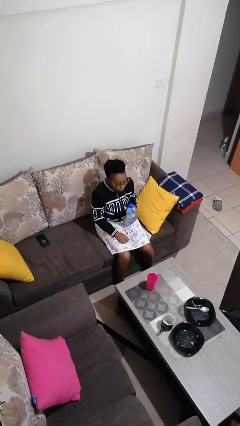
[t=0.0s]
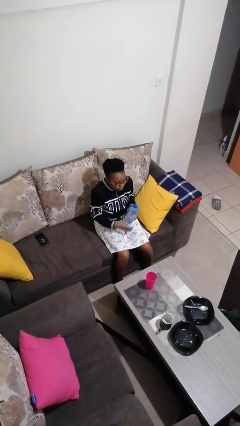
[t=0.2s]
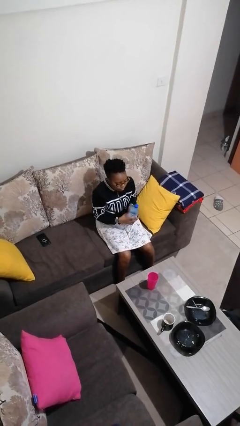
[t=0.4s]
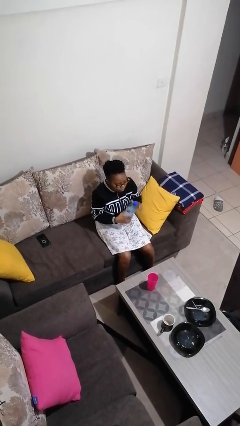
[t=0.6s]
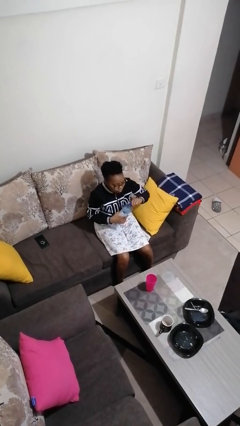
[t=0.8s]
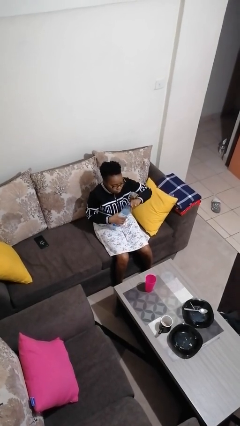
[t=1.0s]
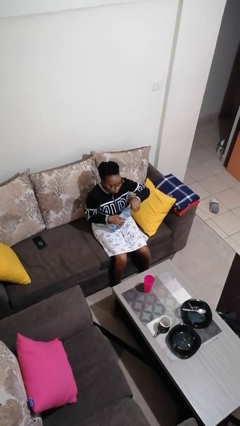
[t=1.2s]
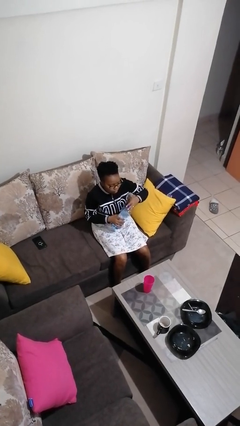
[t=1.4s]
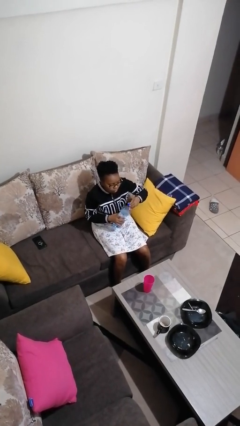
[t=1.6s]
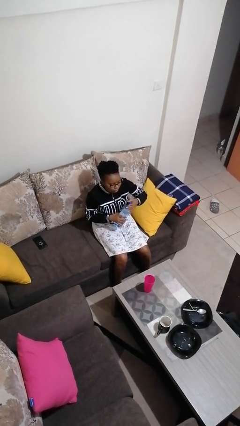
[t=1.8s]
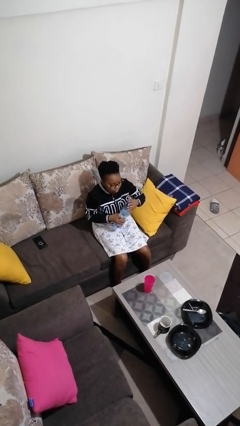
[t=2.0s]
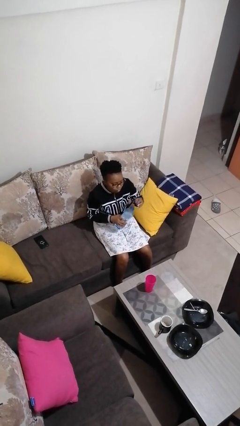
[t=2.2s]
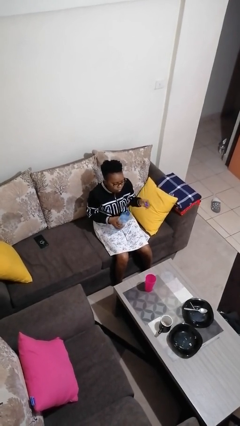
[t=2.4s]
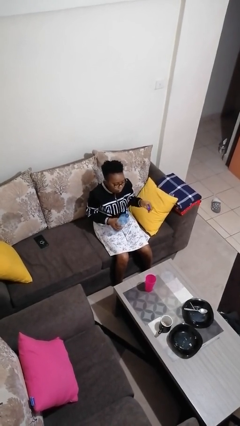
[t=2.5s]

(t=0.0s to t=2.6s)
person unscrews lid from bottle

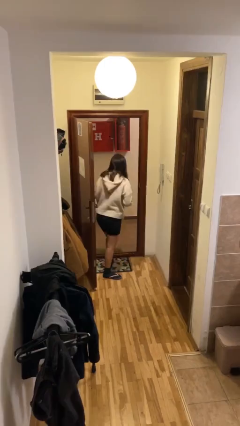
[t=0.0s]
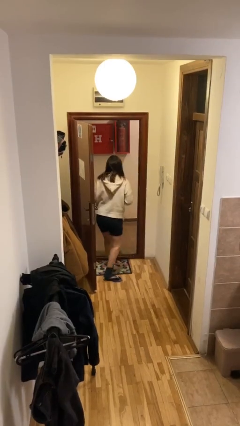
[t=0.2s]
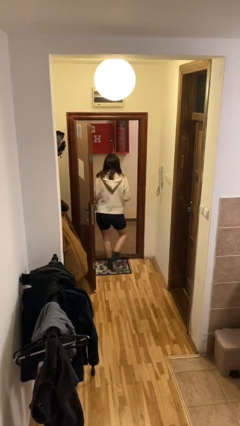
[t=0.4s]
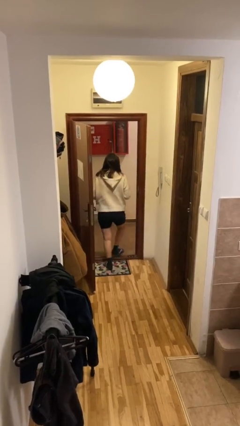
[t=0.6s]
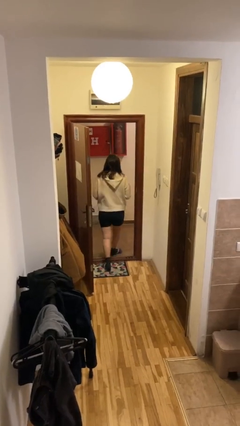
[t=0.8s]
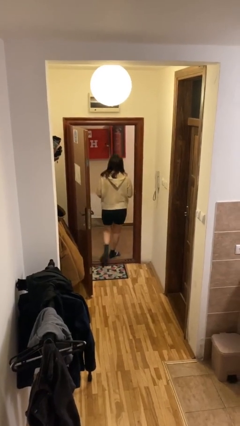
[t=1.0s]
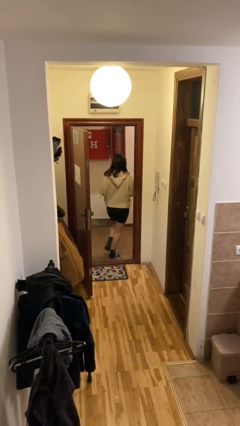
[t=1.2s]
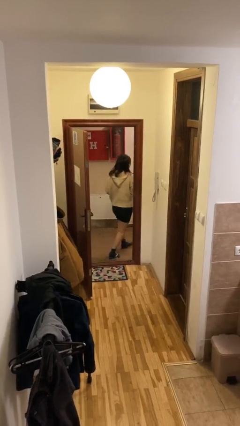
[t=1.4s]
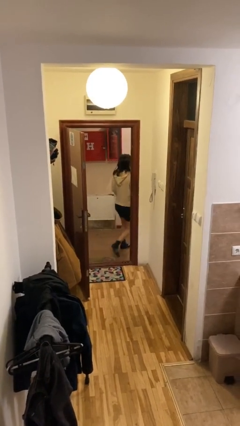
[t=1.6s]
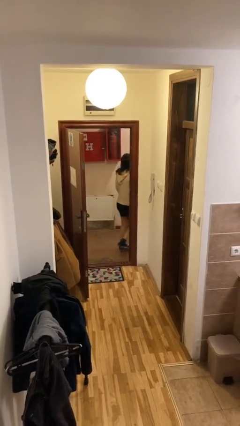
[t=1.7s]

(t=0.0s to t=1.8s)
person exits scene through structure

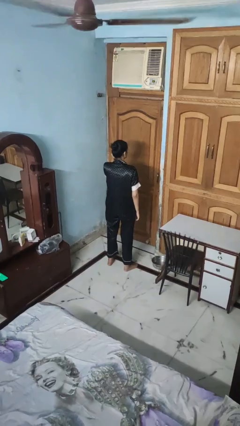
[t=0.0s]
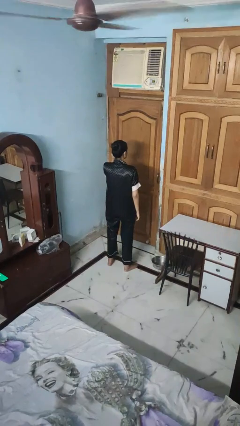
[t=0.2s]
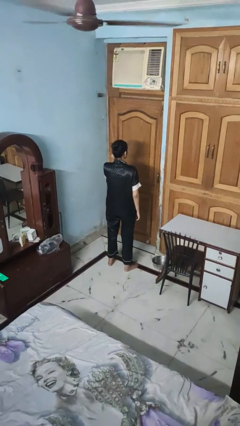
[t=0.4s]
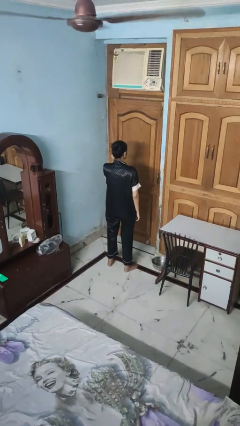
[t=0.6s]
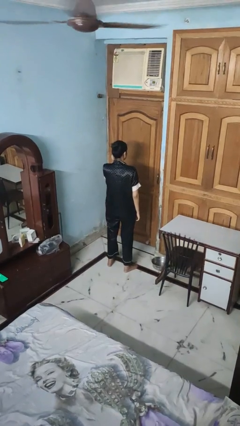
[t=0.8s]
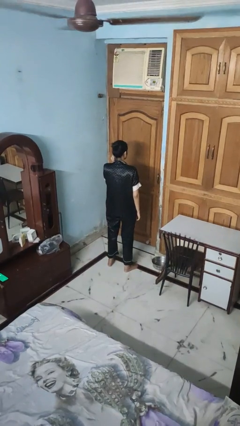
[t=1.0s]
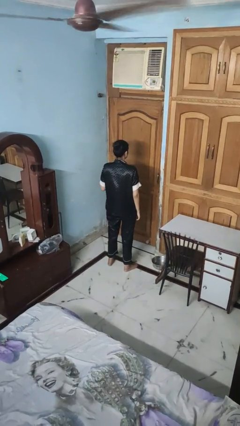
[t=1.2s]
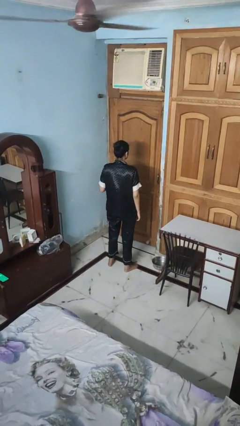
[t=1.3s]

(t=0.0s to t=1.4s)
person touches earlobe

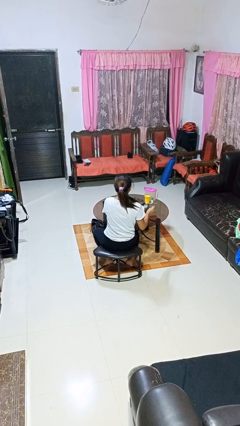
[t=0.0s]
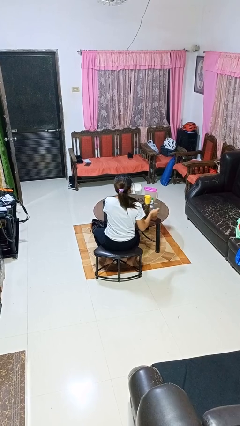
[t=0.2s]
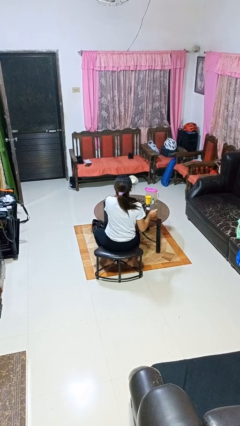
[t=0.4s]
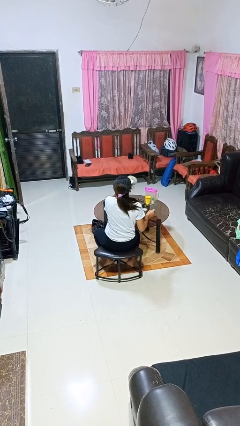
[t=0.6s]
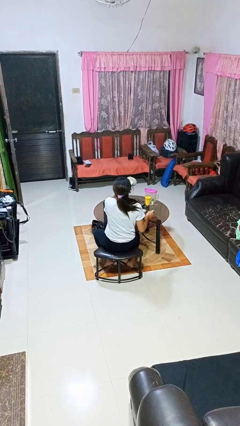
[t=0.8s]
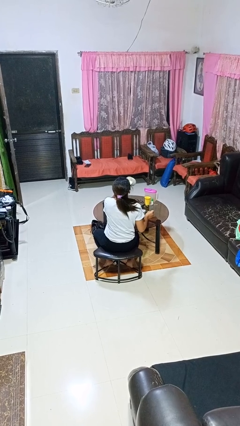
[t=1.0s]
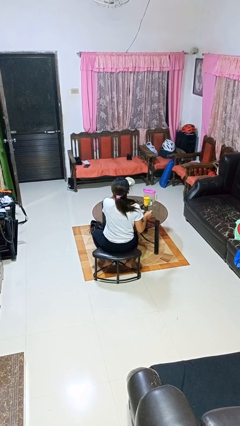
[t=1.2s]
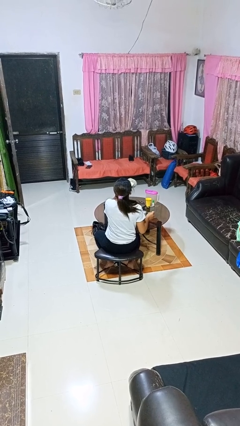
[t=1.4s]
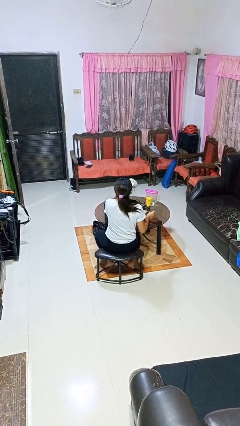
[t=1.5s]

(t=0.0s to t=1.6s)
person drinks from mug

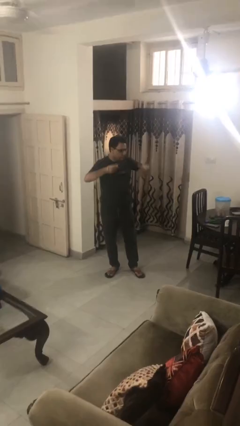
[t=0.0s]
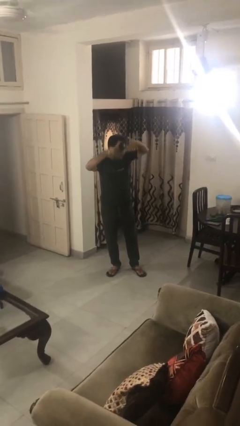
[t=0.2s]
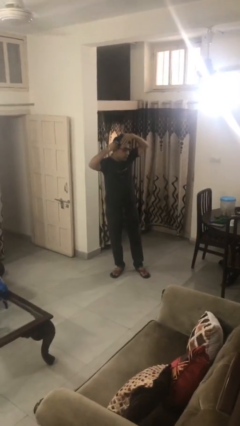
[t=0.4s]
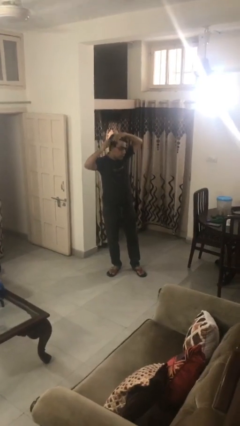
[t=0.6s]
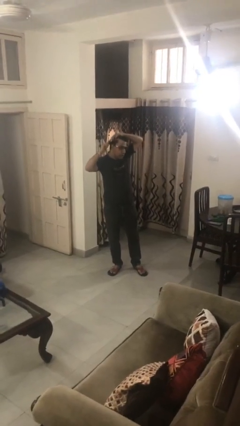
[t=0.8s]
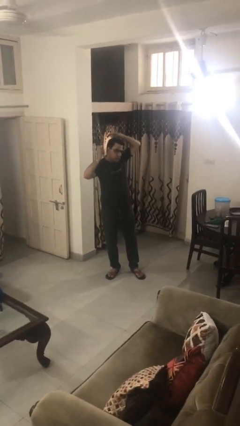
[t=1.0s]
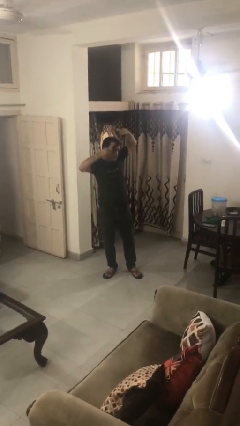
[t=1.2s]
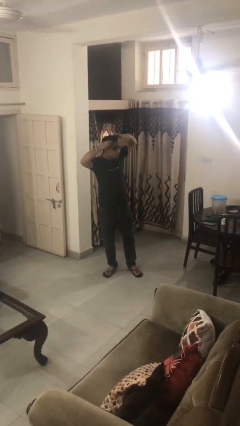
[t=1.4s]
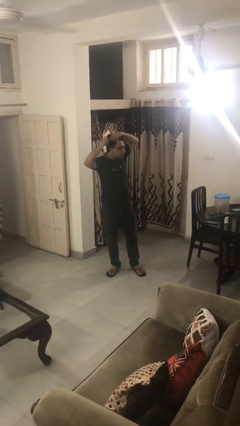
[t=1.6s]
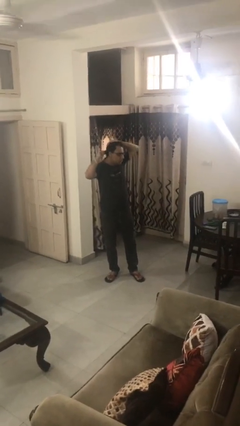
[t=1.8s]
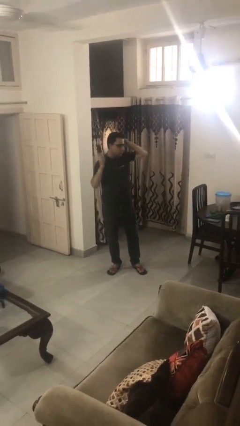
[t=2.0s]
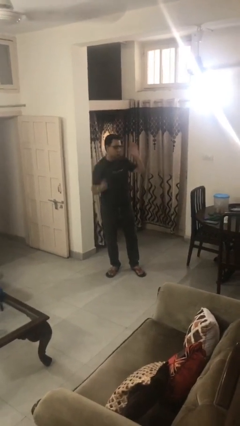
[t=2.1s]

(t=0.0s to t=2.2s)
person brushes hair

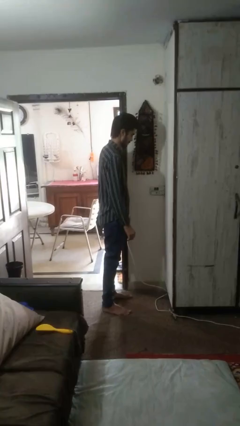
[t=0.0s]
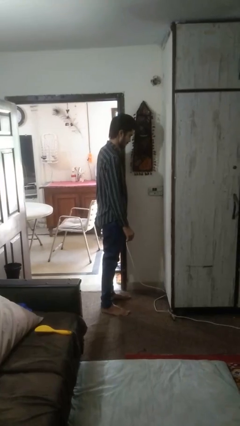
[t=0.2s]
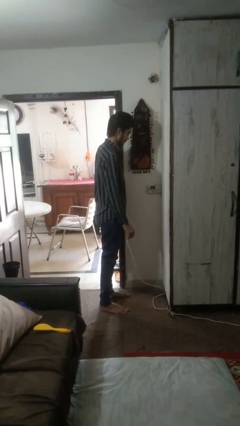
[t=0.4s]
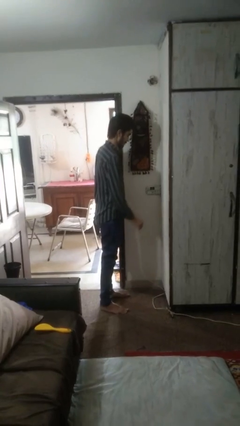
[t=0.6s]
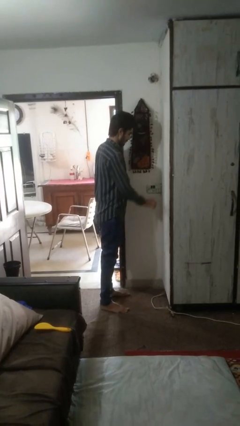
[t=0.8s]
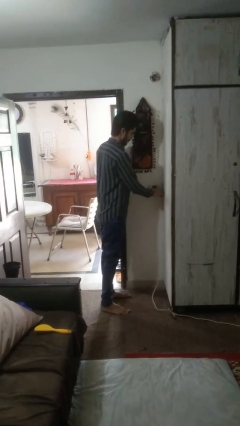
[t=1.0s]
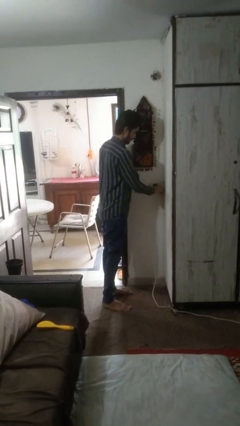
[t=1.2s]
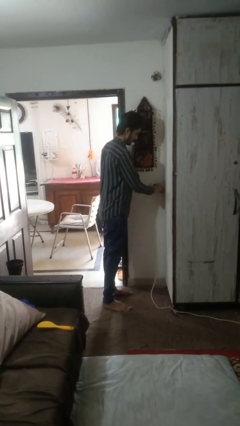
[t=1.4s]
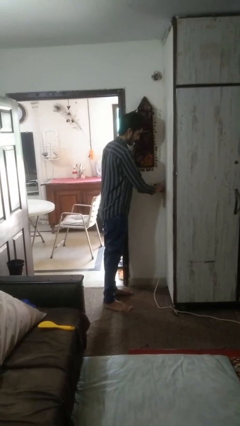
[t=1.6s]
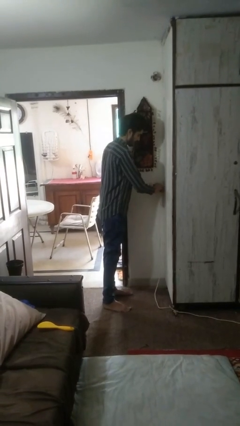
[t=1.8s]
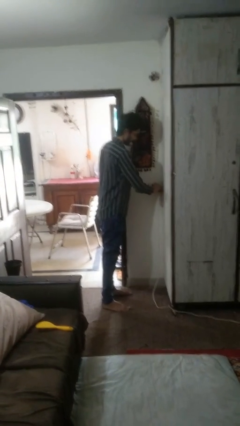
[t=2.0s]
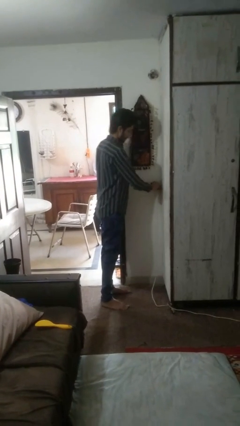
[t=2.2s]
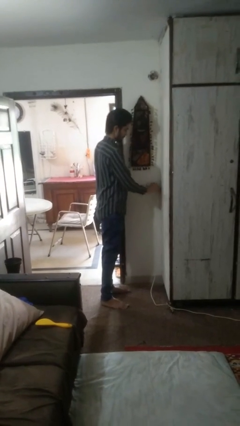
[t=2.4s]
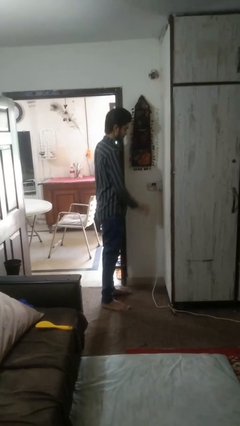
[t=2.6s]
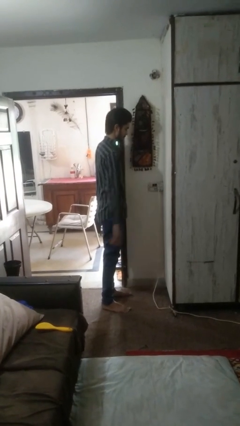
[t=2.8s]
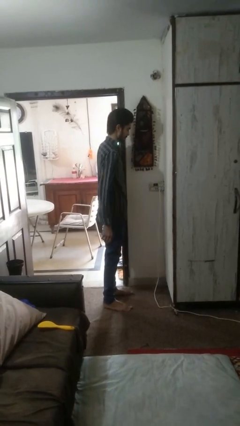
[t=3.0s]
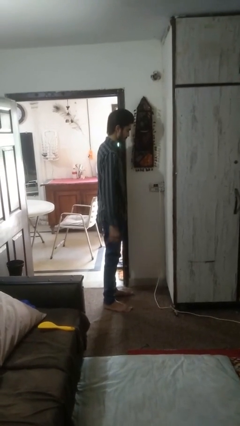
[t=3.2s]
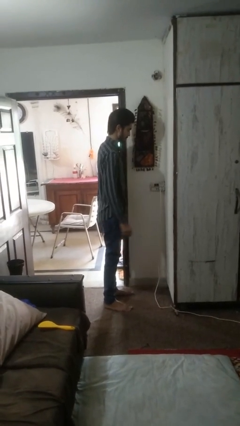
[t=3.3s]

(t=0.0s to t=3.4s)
person plugs into electrical socket

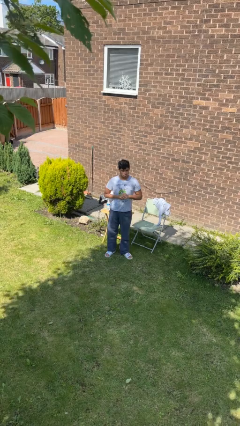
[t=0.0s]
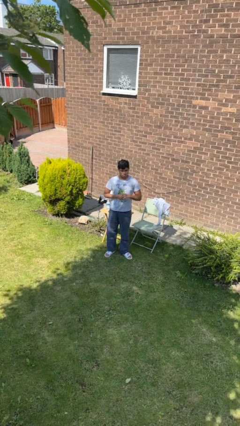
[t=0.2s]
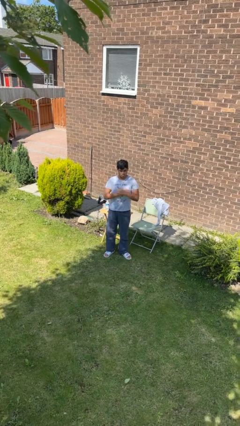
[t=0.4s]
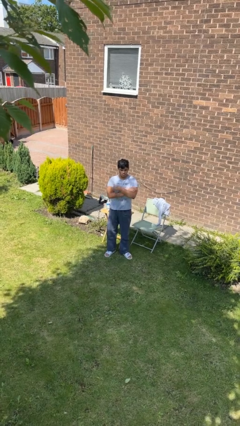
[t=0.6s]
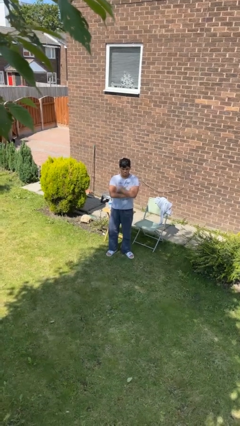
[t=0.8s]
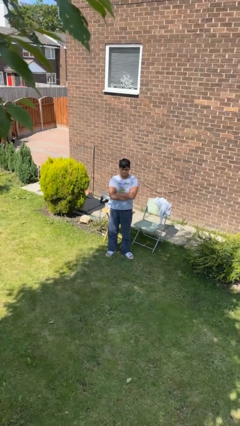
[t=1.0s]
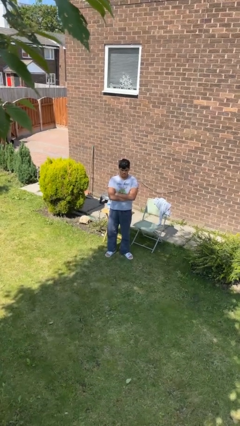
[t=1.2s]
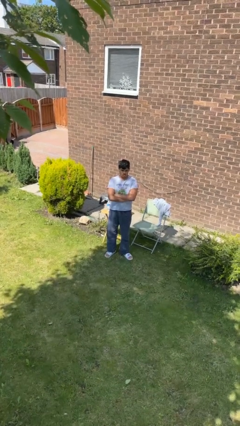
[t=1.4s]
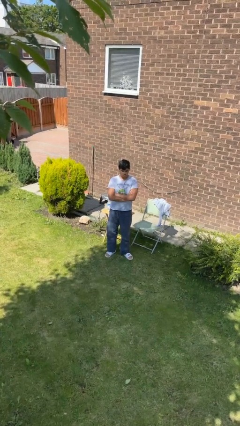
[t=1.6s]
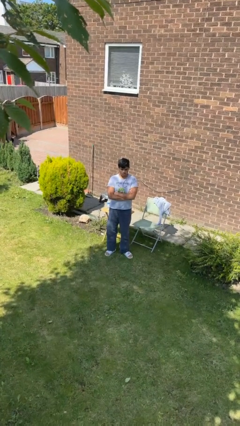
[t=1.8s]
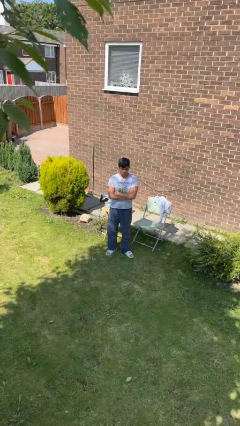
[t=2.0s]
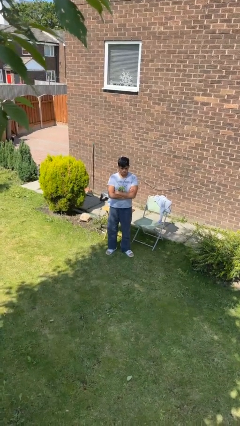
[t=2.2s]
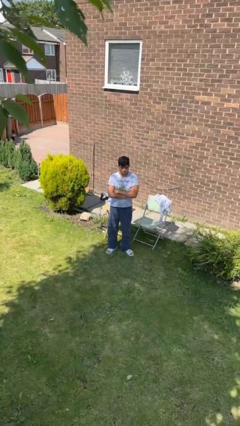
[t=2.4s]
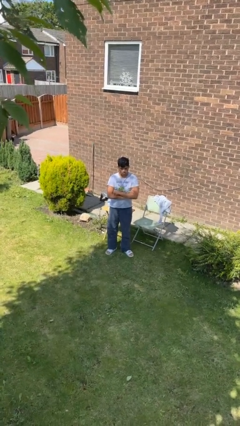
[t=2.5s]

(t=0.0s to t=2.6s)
person crosses arms

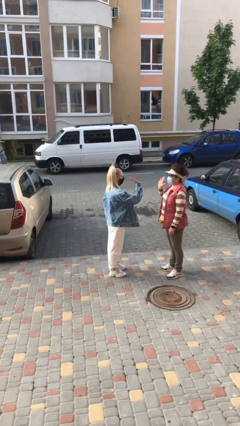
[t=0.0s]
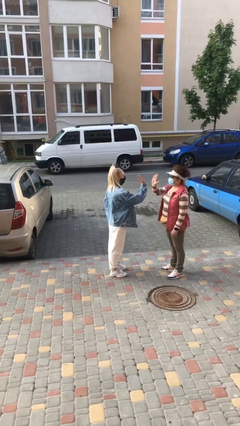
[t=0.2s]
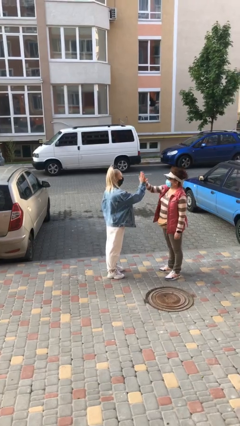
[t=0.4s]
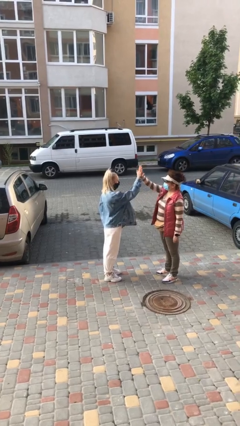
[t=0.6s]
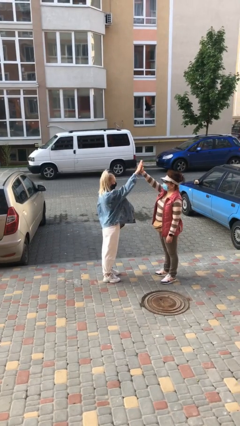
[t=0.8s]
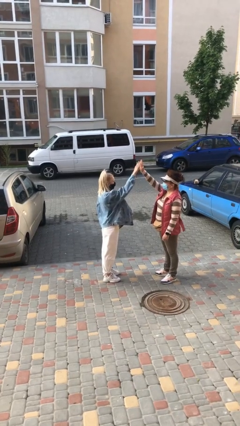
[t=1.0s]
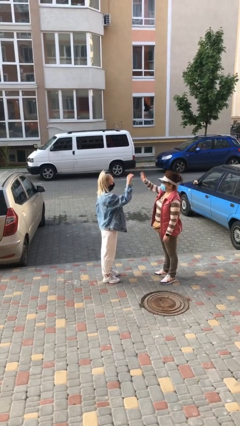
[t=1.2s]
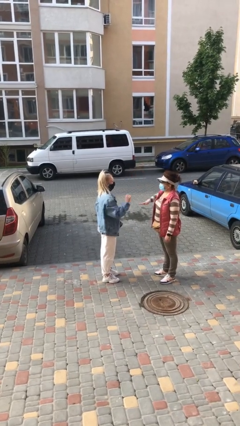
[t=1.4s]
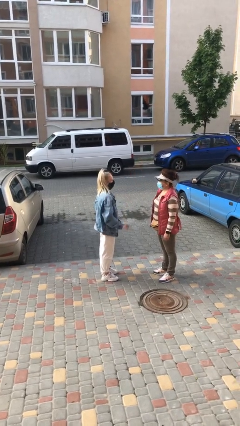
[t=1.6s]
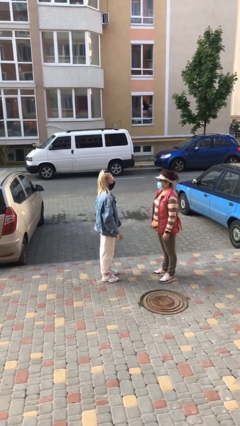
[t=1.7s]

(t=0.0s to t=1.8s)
person highfives hand
